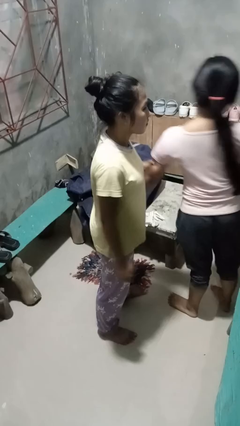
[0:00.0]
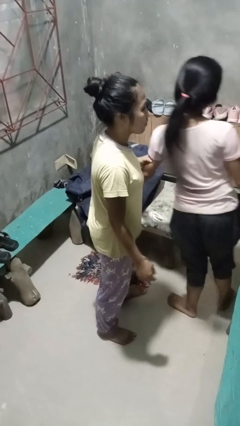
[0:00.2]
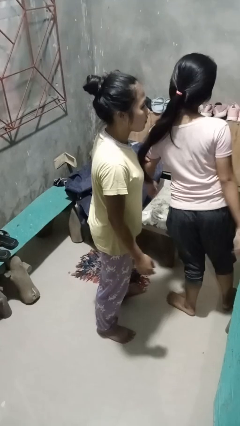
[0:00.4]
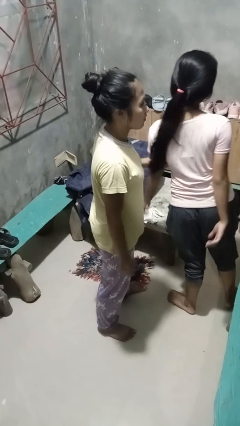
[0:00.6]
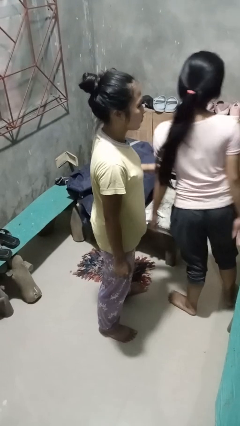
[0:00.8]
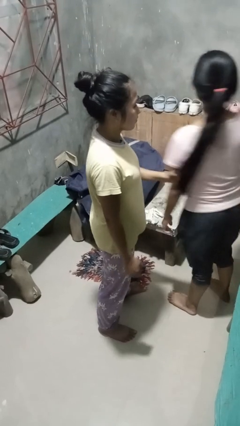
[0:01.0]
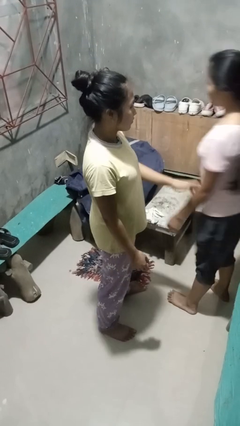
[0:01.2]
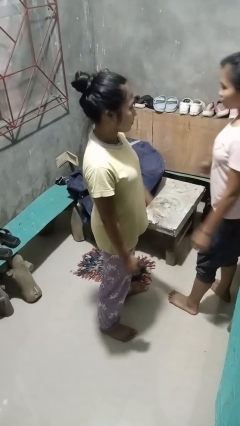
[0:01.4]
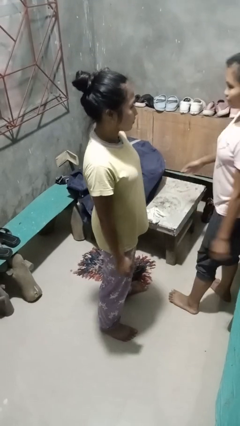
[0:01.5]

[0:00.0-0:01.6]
person grabs person by bicep

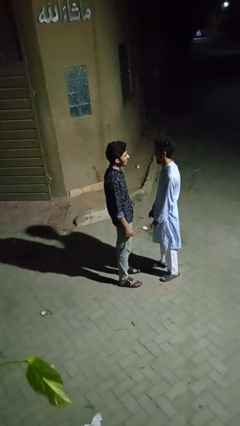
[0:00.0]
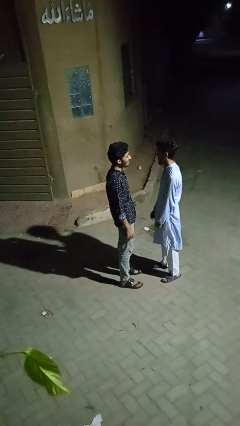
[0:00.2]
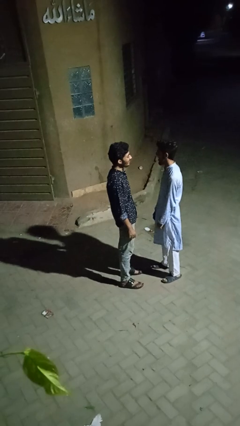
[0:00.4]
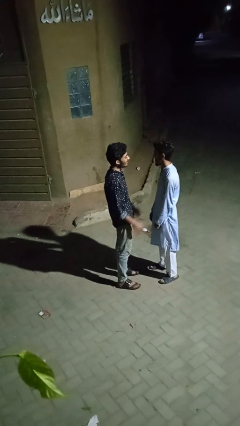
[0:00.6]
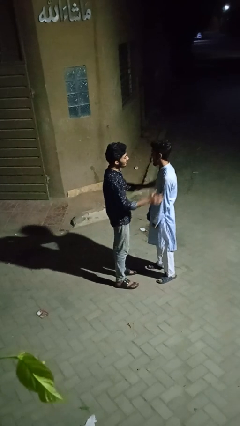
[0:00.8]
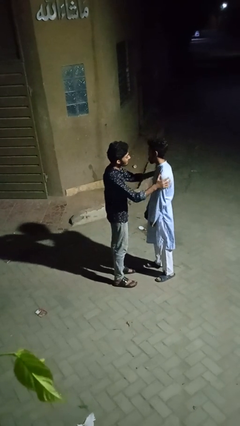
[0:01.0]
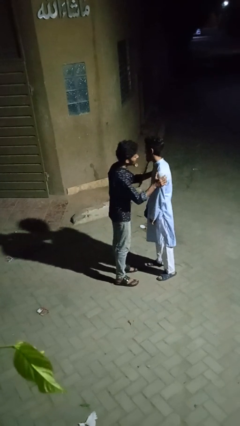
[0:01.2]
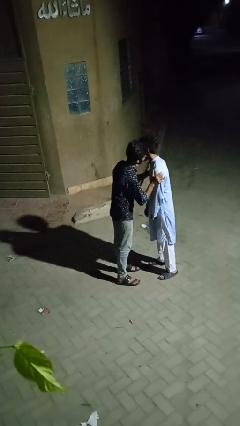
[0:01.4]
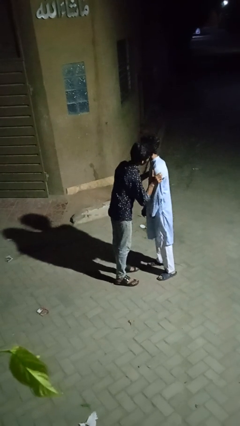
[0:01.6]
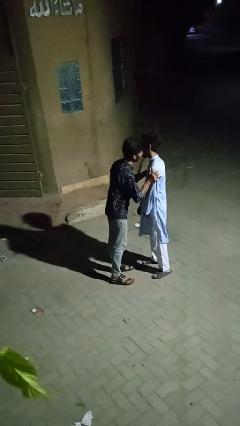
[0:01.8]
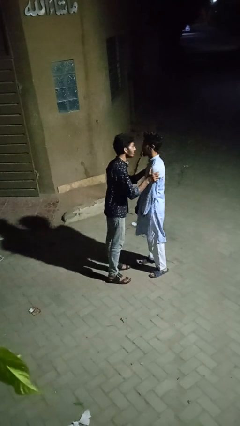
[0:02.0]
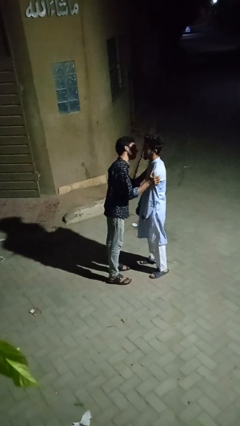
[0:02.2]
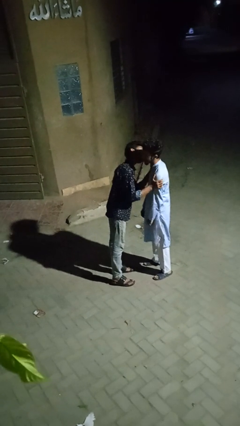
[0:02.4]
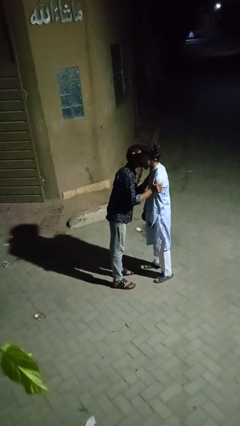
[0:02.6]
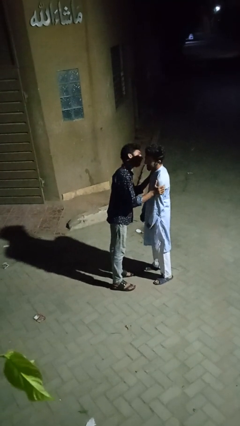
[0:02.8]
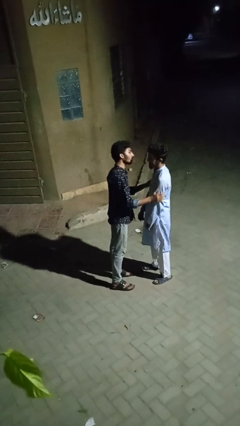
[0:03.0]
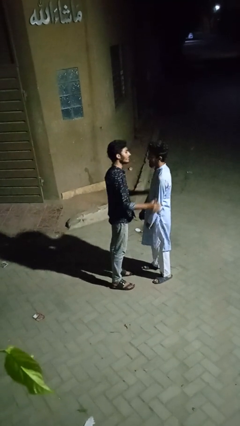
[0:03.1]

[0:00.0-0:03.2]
person kisses cheek of person

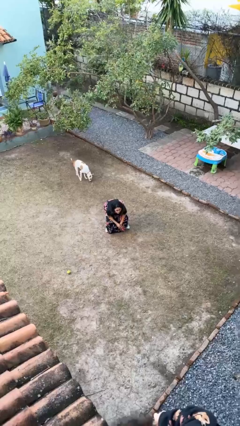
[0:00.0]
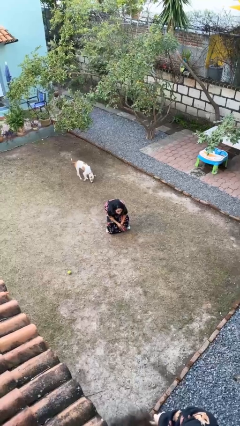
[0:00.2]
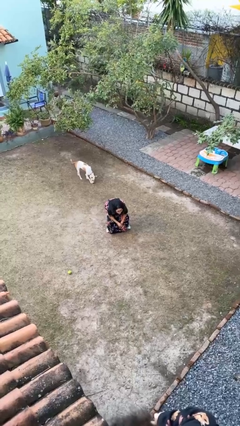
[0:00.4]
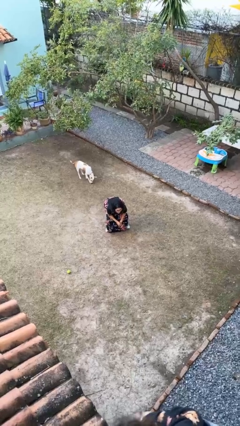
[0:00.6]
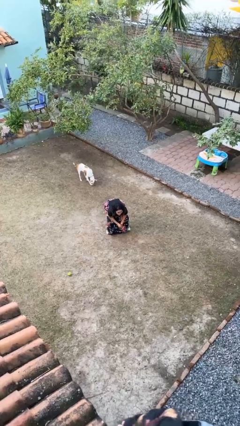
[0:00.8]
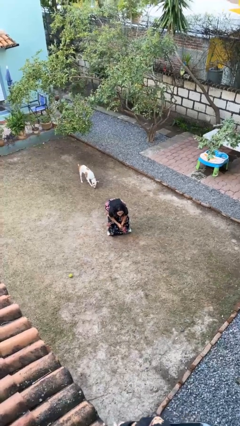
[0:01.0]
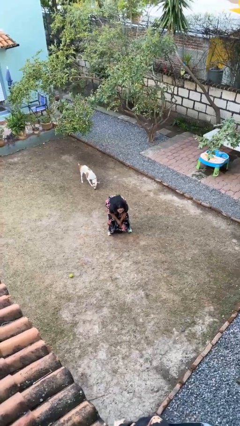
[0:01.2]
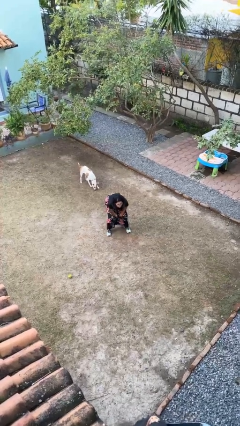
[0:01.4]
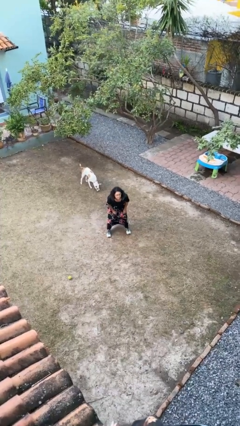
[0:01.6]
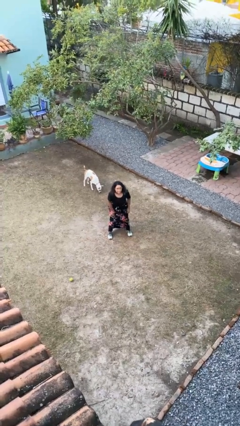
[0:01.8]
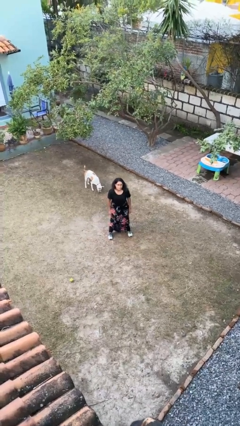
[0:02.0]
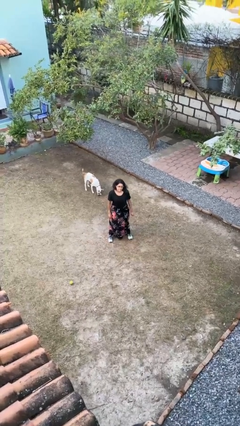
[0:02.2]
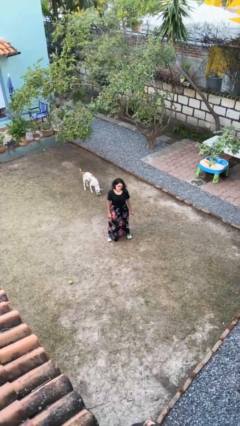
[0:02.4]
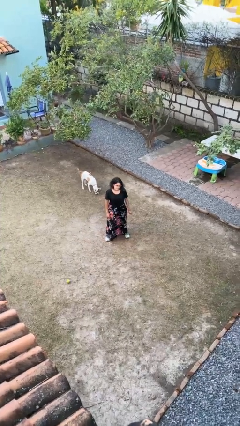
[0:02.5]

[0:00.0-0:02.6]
person stands up

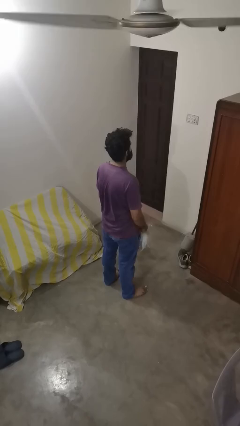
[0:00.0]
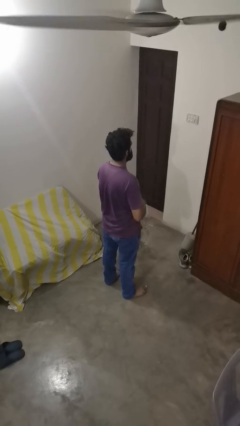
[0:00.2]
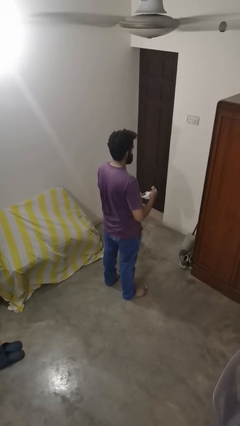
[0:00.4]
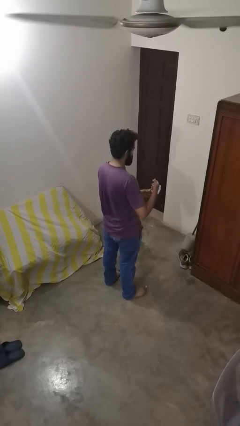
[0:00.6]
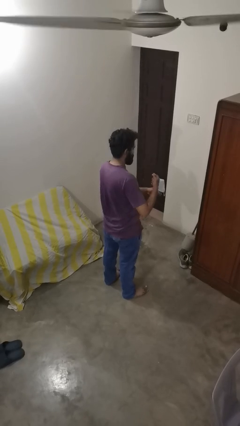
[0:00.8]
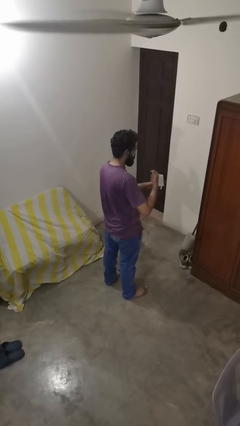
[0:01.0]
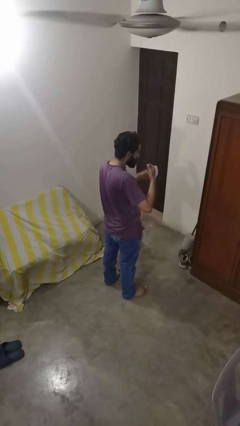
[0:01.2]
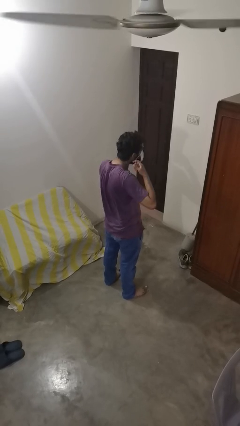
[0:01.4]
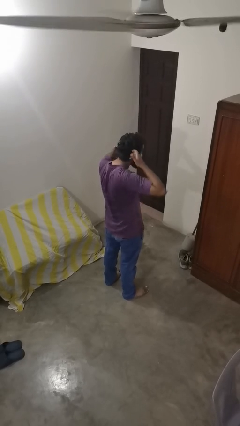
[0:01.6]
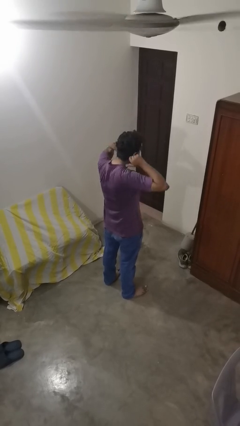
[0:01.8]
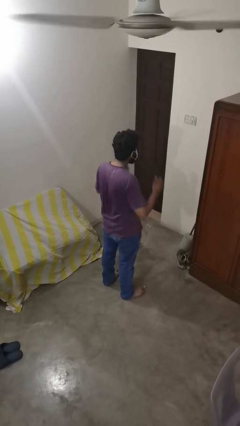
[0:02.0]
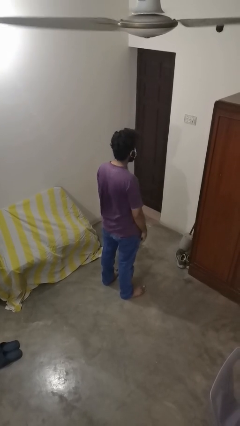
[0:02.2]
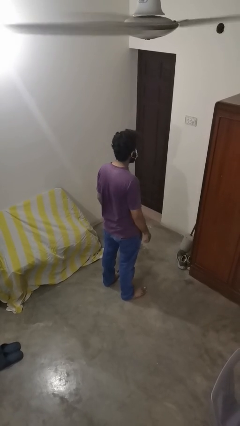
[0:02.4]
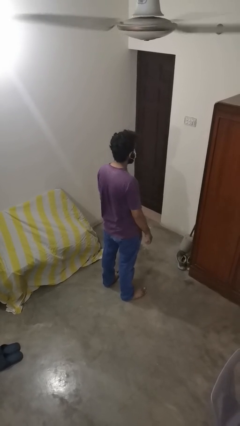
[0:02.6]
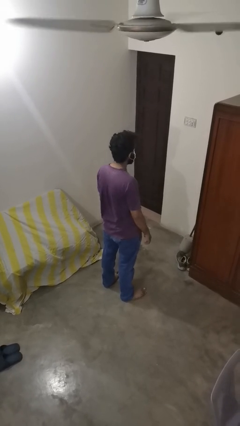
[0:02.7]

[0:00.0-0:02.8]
person puts on facemask

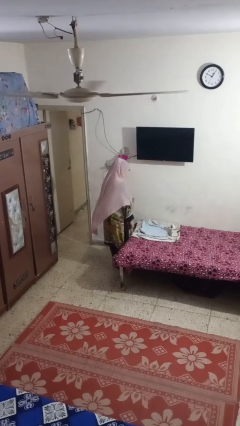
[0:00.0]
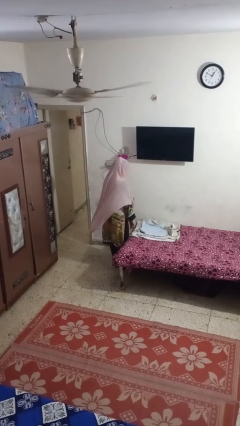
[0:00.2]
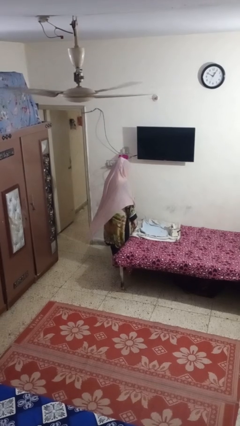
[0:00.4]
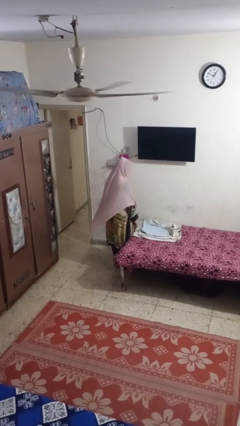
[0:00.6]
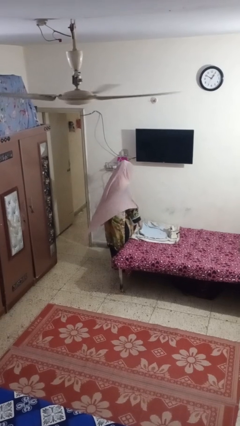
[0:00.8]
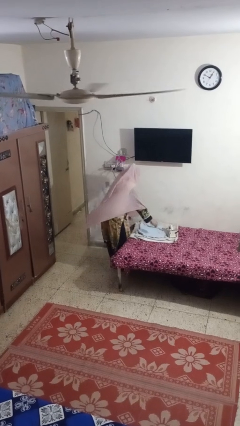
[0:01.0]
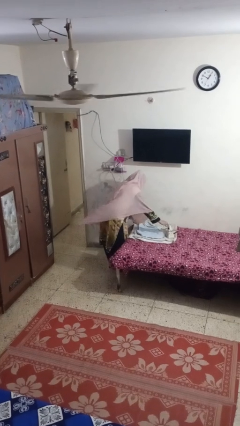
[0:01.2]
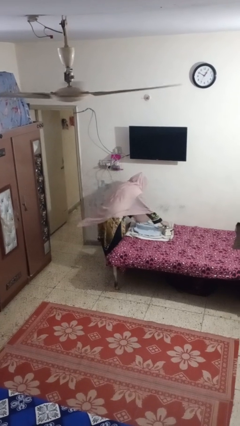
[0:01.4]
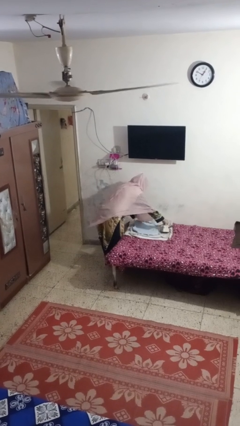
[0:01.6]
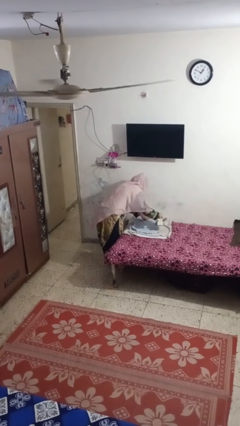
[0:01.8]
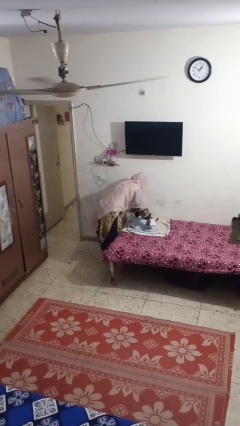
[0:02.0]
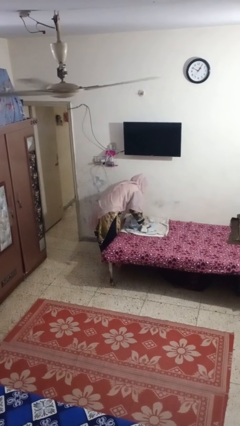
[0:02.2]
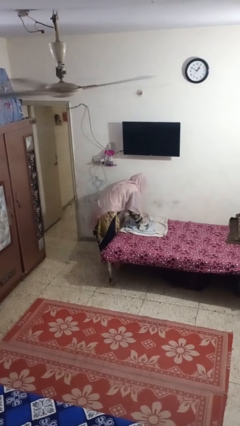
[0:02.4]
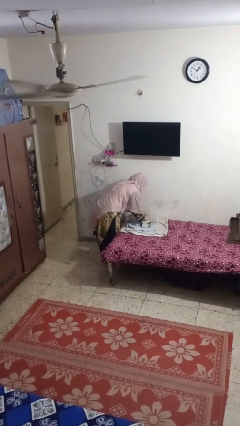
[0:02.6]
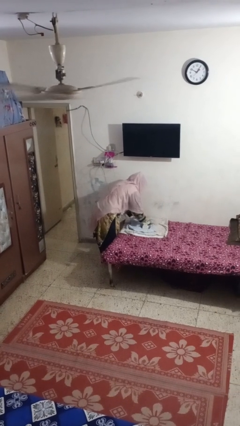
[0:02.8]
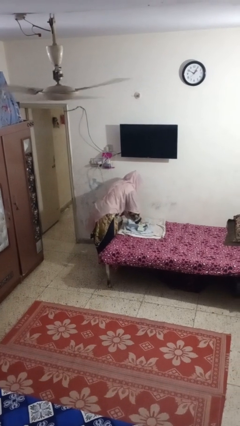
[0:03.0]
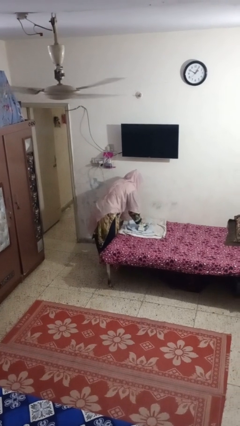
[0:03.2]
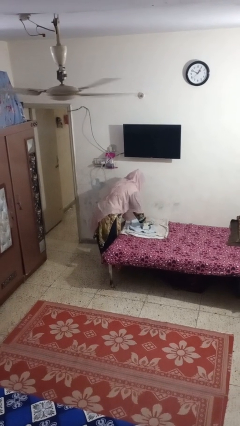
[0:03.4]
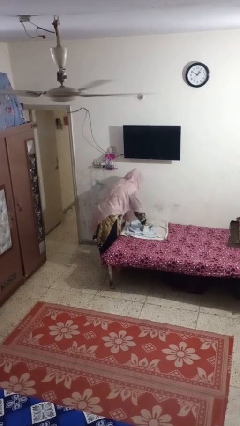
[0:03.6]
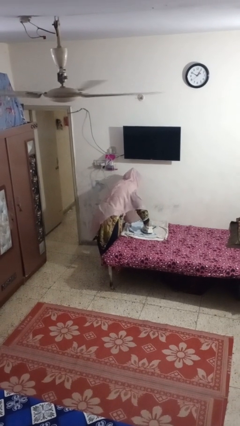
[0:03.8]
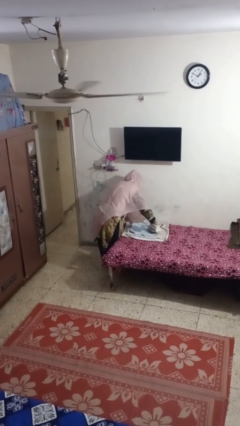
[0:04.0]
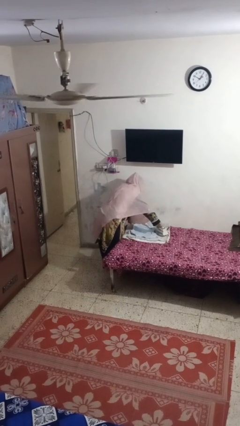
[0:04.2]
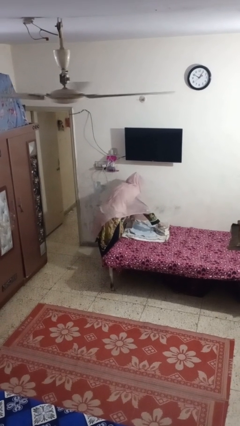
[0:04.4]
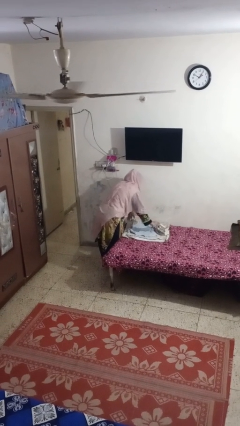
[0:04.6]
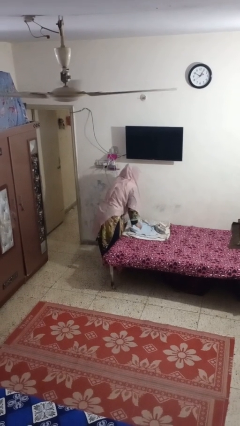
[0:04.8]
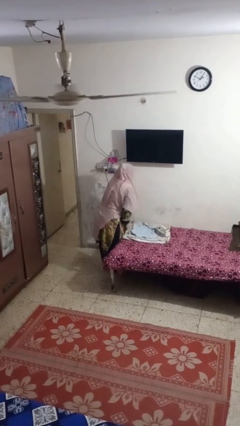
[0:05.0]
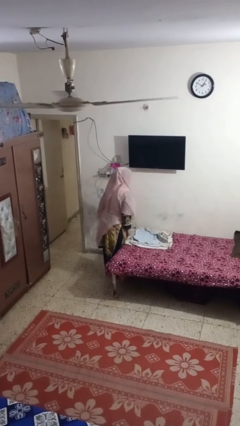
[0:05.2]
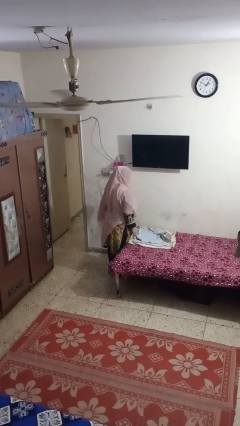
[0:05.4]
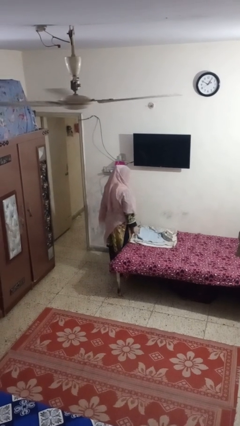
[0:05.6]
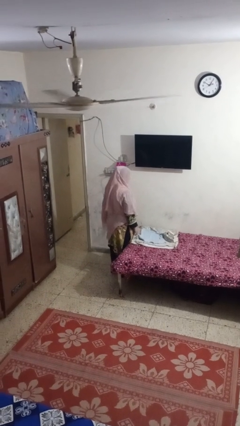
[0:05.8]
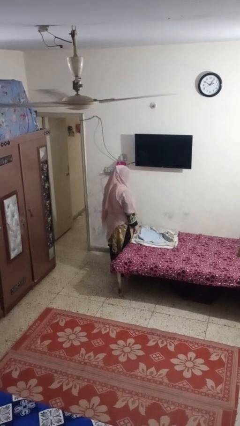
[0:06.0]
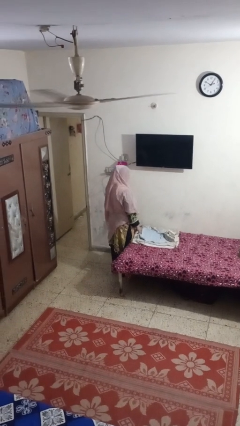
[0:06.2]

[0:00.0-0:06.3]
person irons clothes

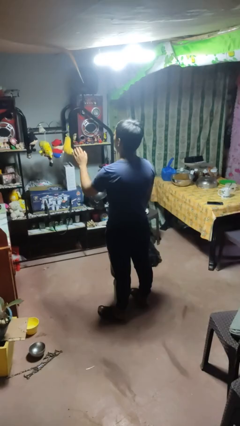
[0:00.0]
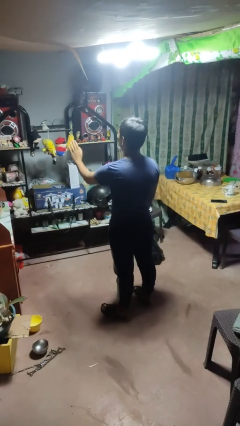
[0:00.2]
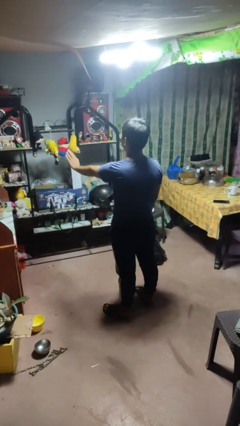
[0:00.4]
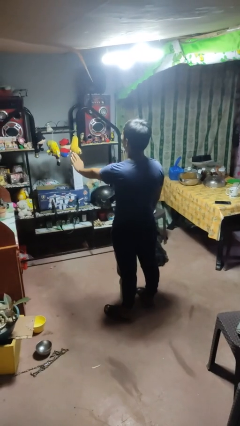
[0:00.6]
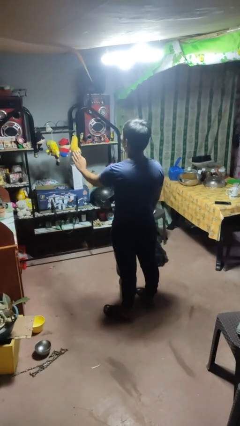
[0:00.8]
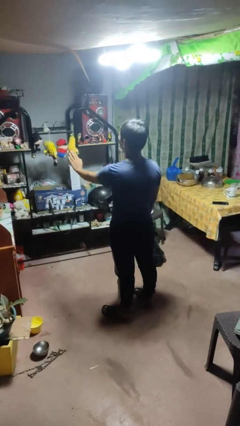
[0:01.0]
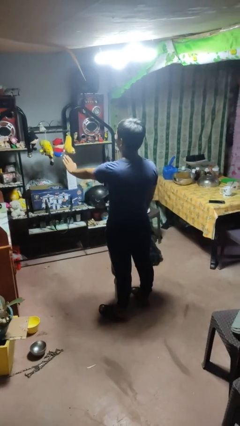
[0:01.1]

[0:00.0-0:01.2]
person gestures stop
